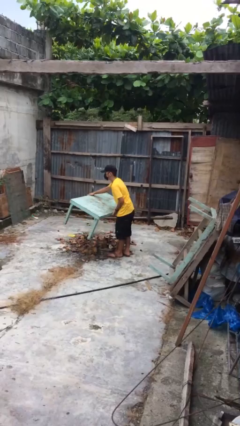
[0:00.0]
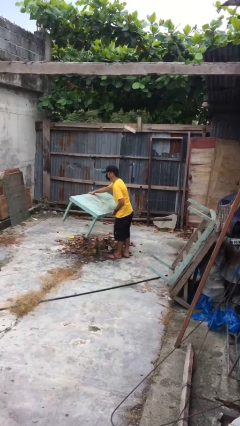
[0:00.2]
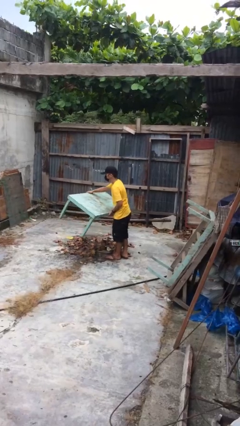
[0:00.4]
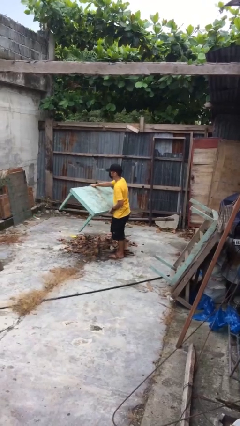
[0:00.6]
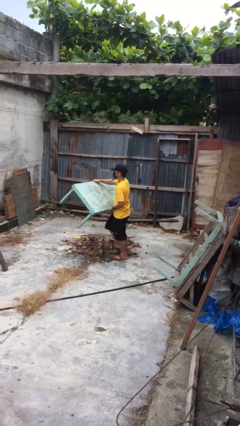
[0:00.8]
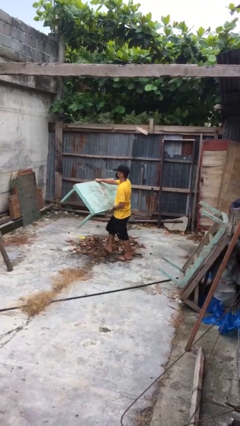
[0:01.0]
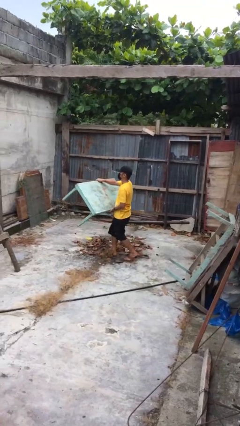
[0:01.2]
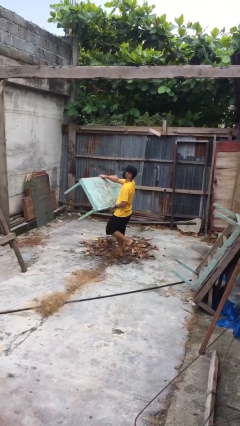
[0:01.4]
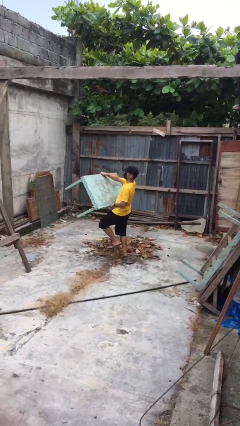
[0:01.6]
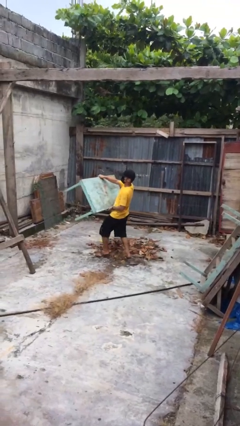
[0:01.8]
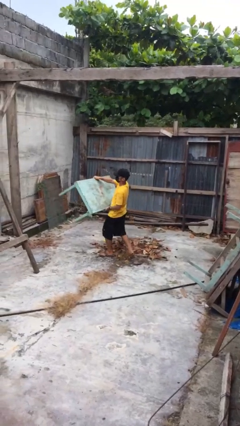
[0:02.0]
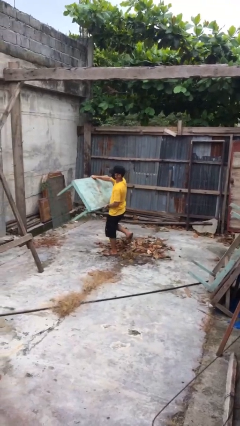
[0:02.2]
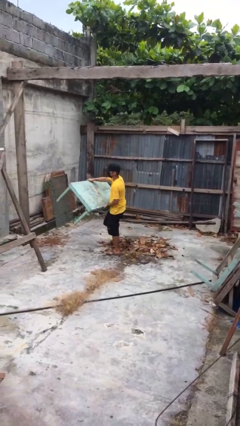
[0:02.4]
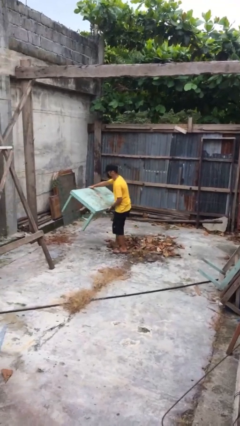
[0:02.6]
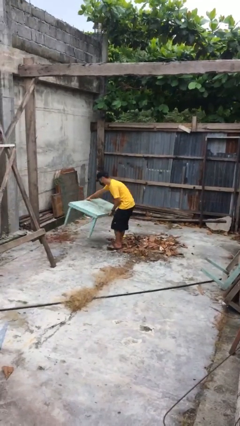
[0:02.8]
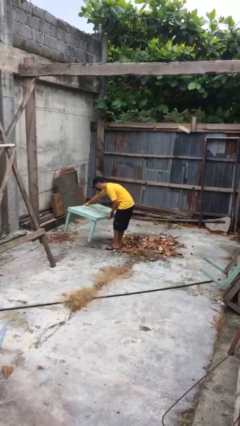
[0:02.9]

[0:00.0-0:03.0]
person carries heavy object

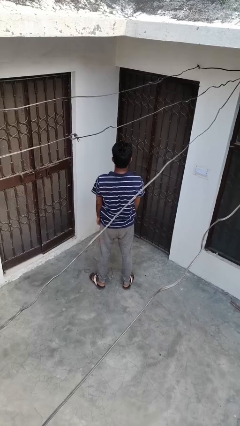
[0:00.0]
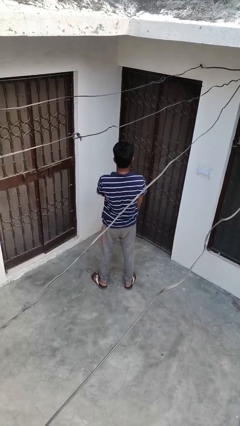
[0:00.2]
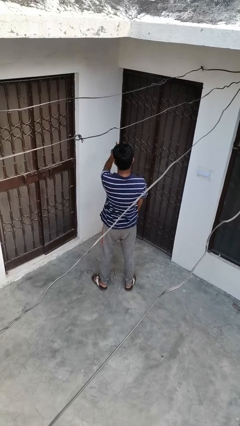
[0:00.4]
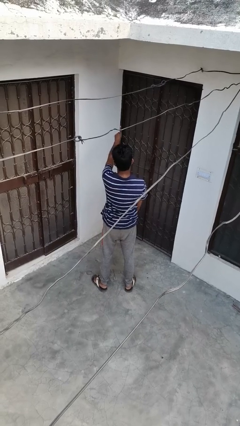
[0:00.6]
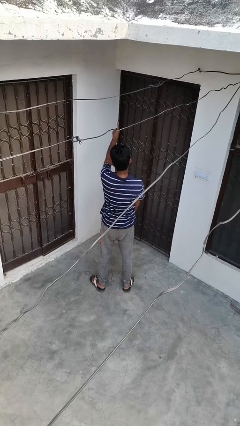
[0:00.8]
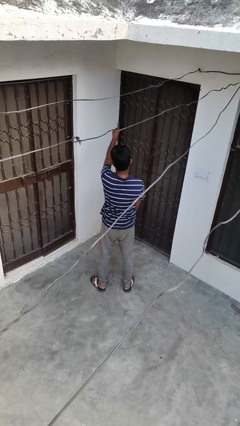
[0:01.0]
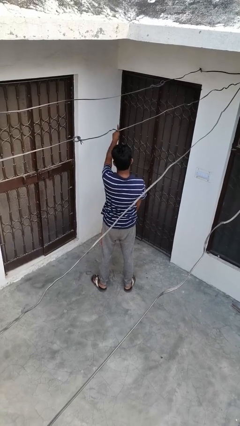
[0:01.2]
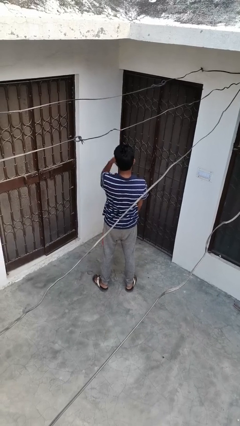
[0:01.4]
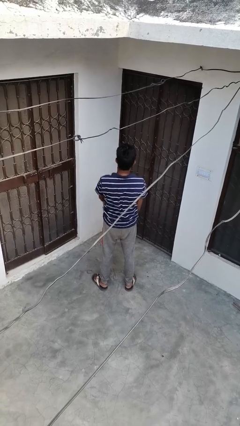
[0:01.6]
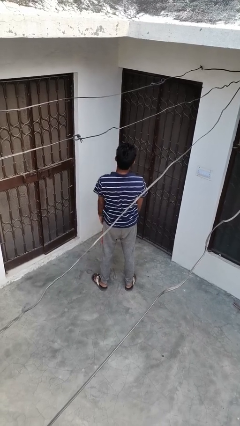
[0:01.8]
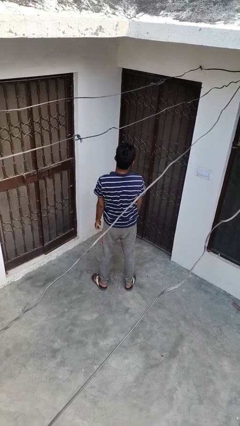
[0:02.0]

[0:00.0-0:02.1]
person gestures number one

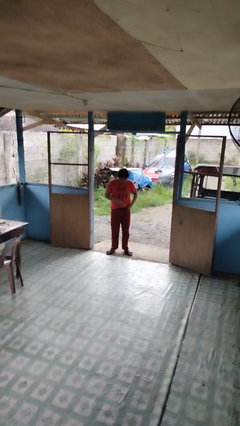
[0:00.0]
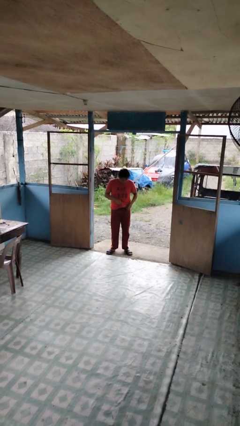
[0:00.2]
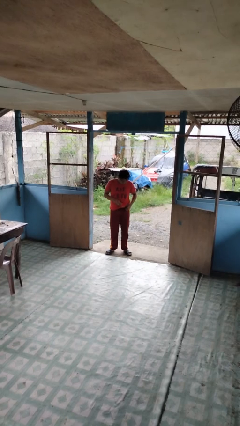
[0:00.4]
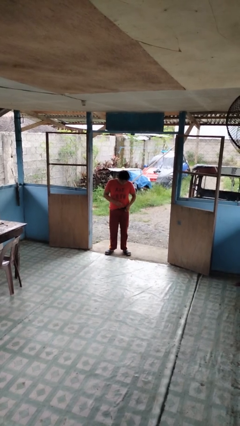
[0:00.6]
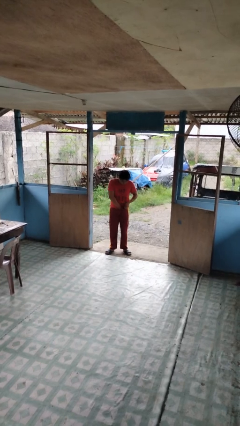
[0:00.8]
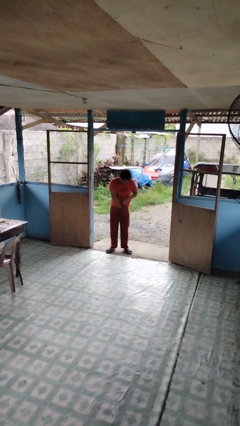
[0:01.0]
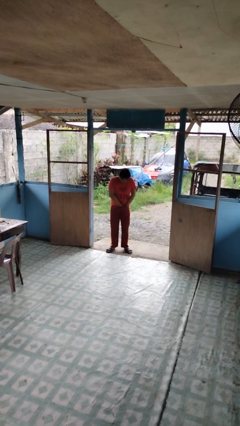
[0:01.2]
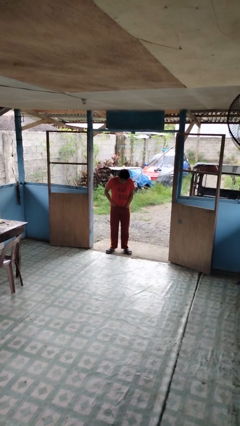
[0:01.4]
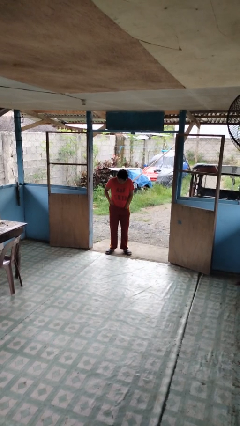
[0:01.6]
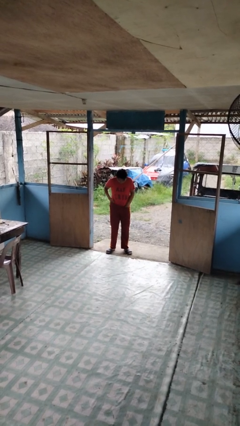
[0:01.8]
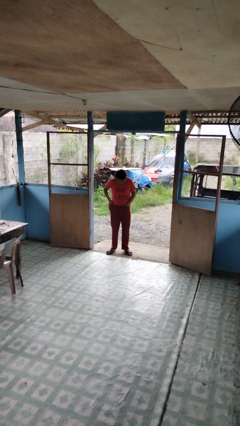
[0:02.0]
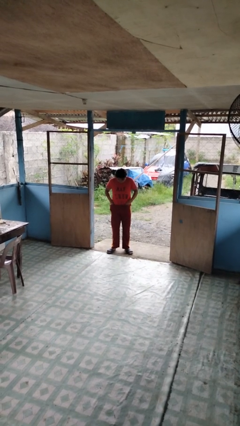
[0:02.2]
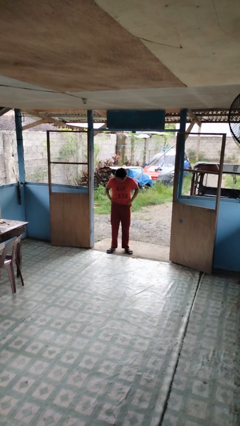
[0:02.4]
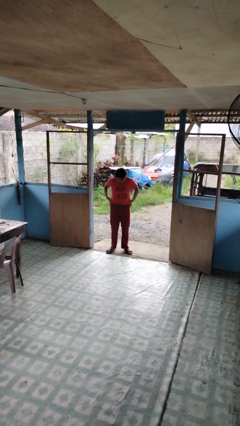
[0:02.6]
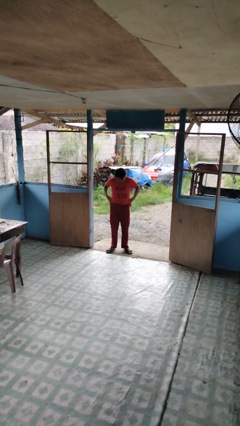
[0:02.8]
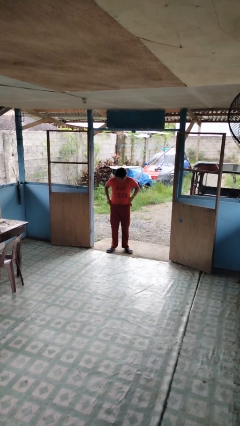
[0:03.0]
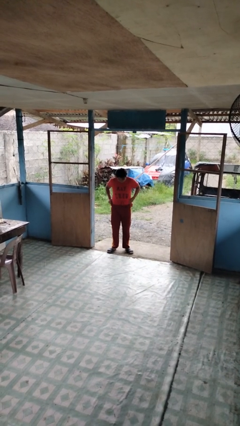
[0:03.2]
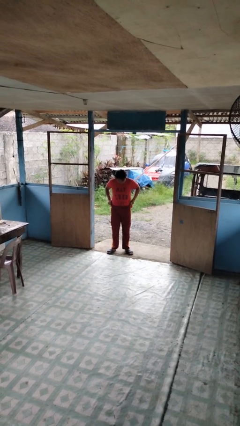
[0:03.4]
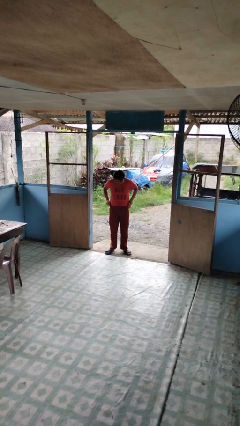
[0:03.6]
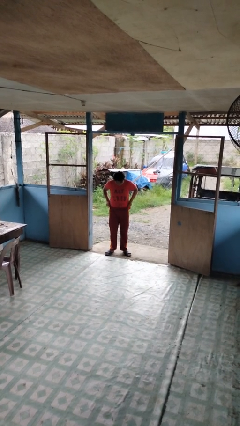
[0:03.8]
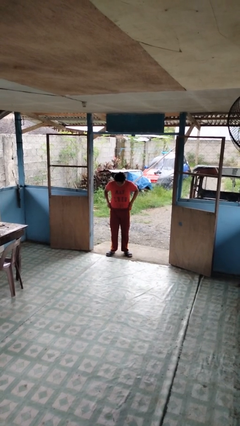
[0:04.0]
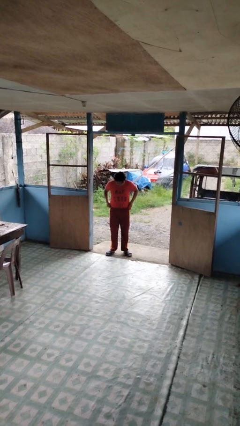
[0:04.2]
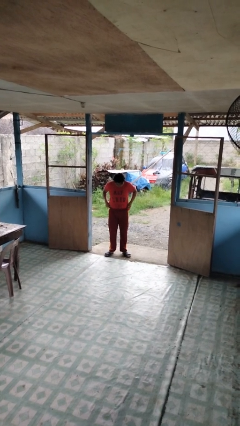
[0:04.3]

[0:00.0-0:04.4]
person tucks in shirt

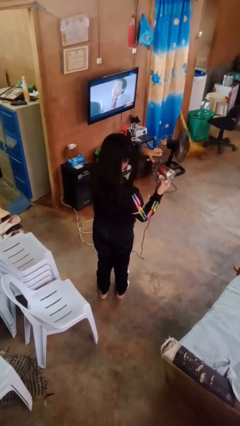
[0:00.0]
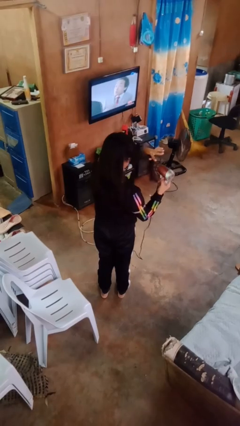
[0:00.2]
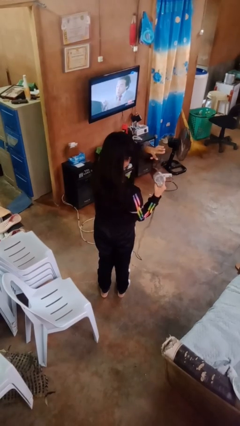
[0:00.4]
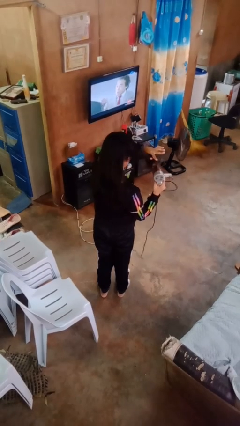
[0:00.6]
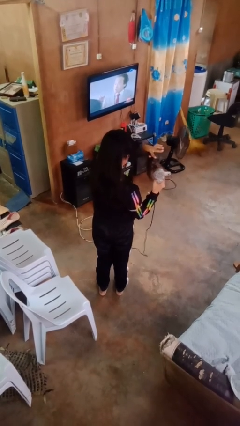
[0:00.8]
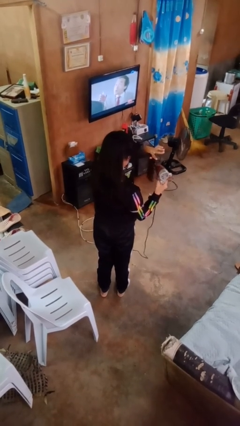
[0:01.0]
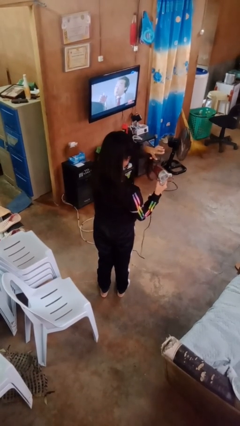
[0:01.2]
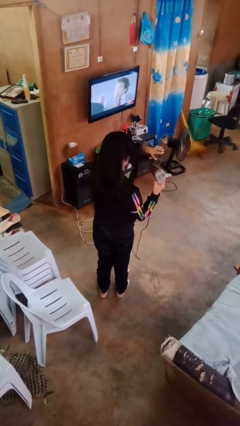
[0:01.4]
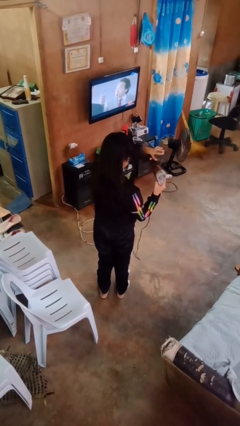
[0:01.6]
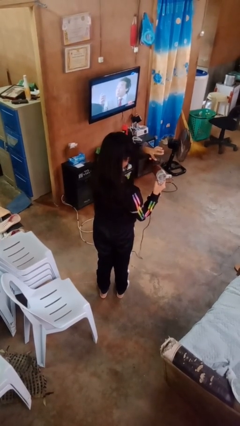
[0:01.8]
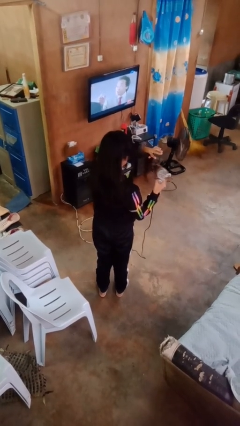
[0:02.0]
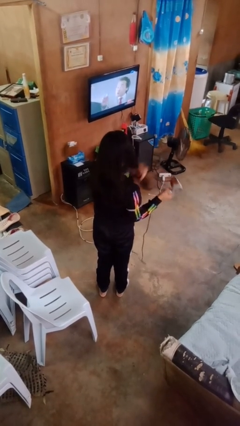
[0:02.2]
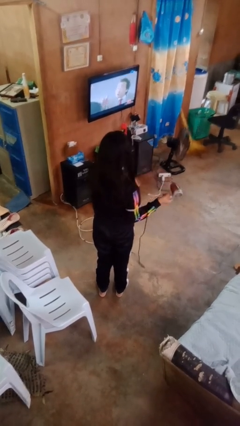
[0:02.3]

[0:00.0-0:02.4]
person dries hair with hairdryer

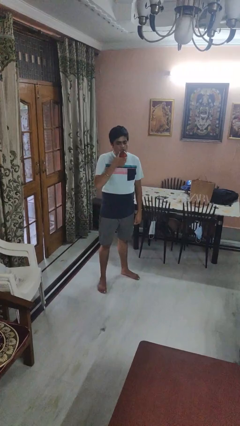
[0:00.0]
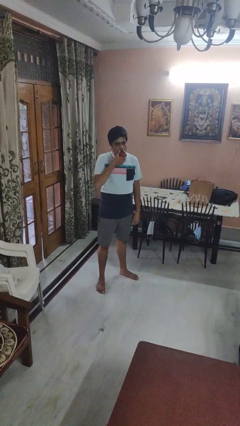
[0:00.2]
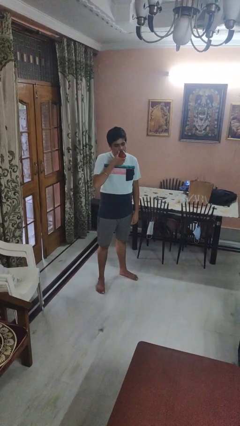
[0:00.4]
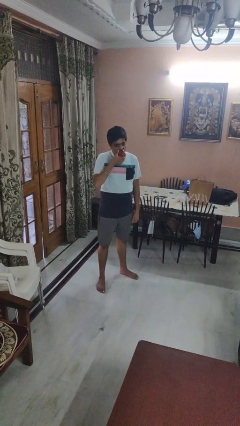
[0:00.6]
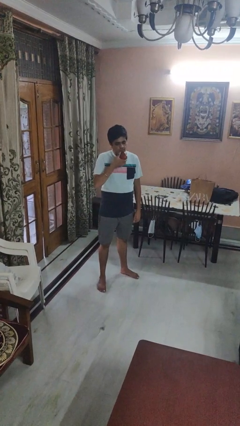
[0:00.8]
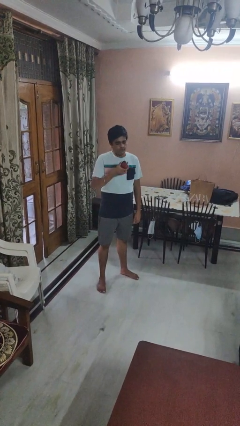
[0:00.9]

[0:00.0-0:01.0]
person eats apple

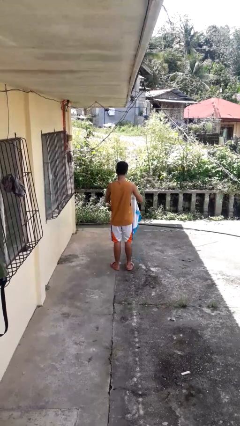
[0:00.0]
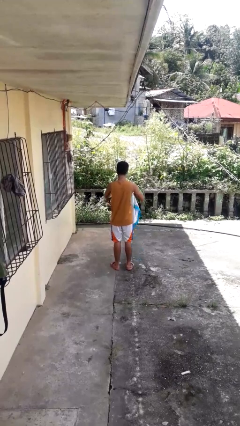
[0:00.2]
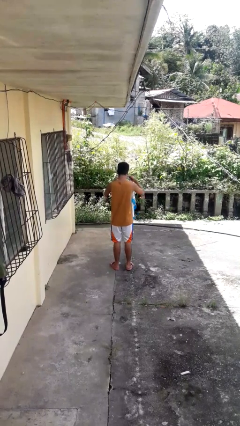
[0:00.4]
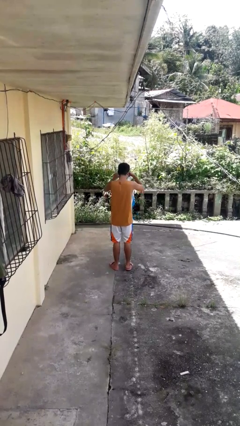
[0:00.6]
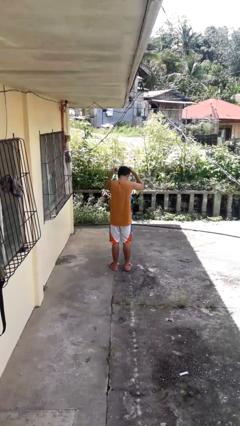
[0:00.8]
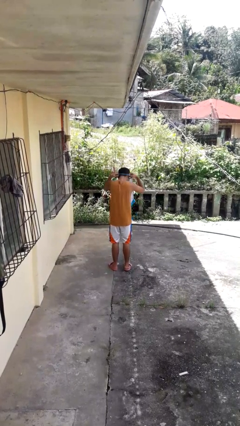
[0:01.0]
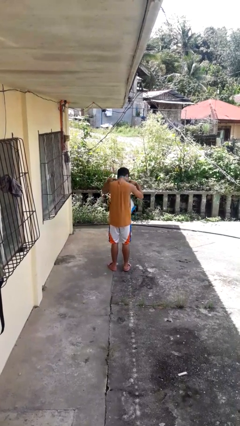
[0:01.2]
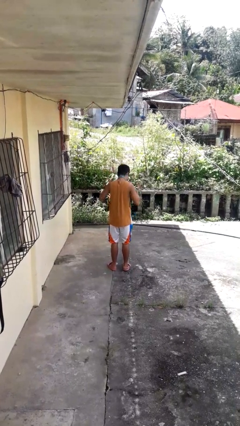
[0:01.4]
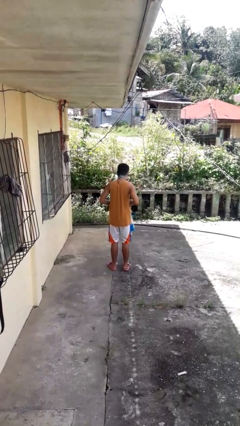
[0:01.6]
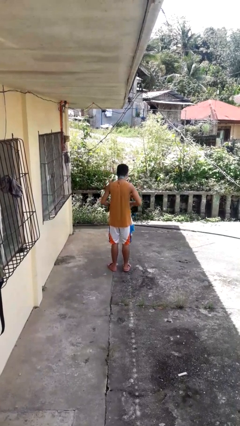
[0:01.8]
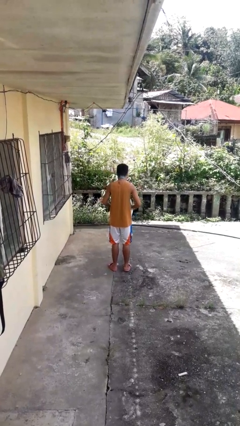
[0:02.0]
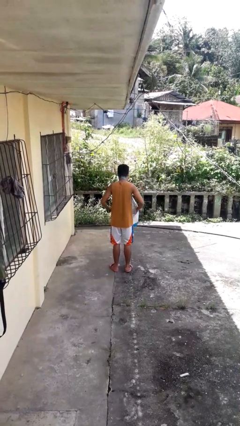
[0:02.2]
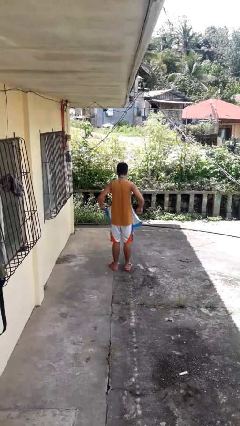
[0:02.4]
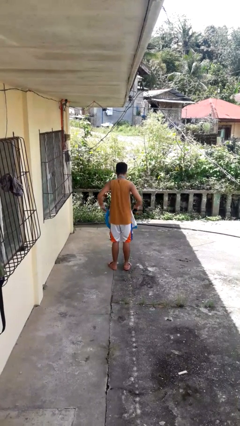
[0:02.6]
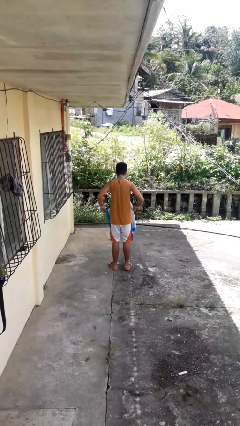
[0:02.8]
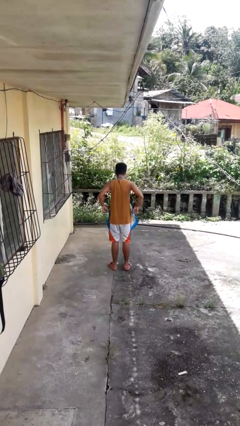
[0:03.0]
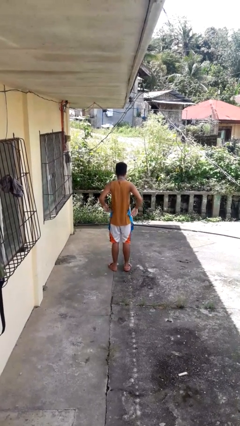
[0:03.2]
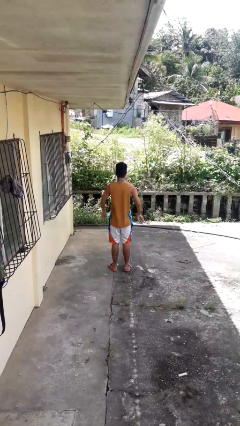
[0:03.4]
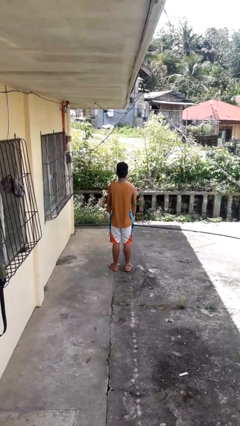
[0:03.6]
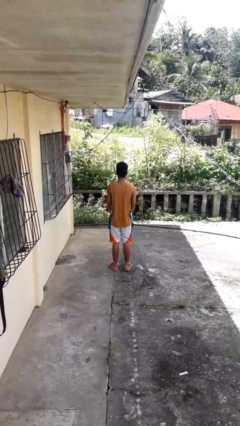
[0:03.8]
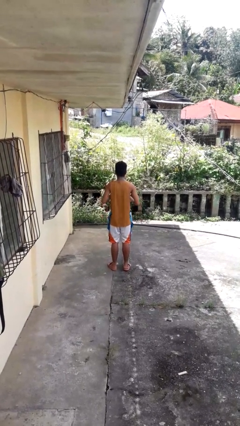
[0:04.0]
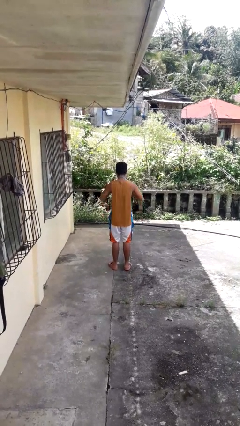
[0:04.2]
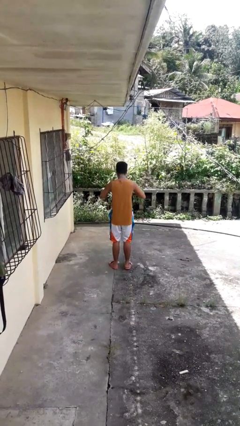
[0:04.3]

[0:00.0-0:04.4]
person puts on apron
